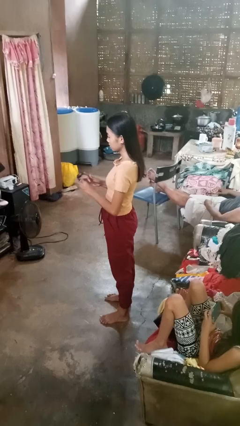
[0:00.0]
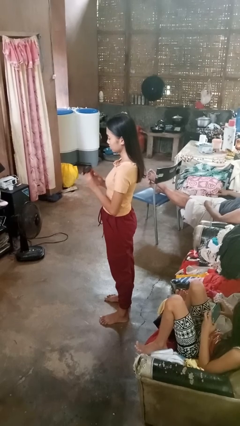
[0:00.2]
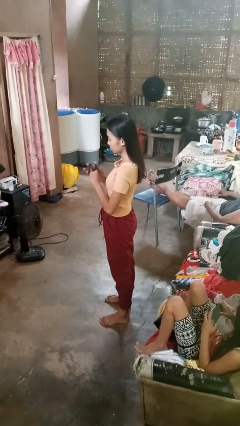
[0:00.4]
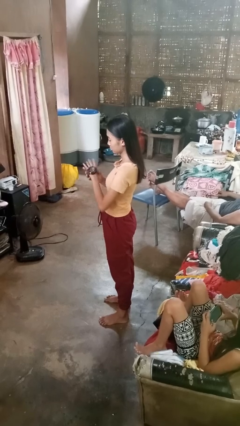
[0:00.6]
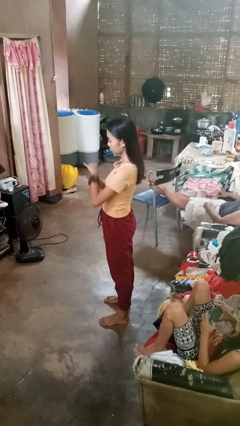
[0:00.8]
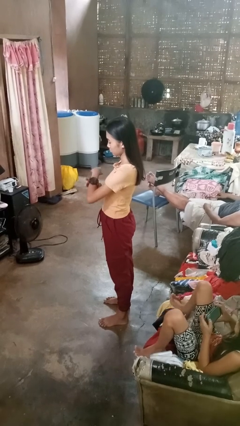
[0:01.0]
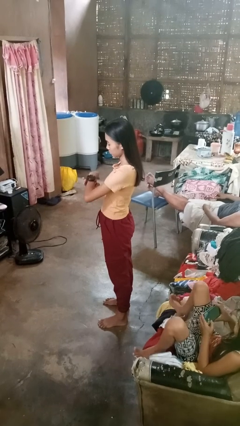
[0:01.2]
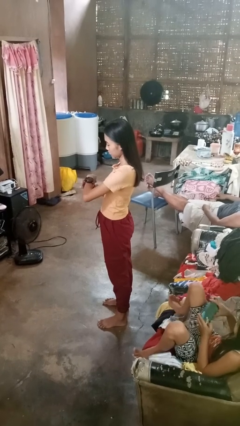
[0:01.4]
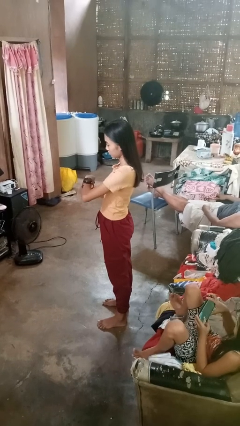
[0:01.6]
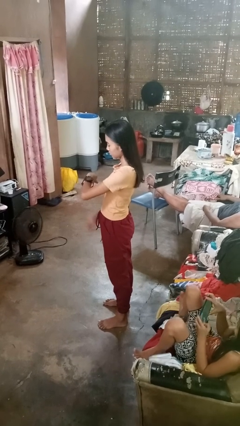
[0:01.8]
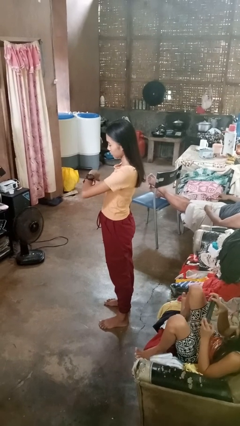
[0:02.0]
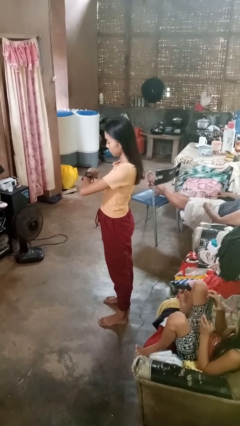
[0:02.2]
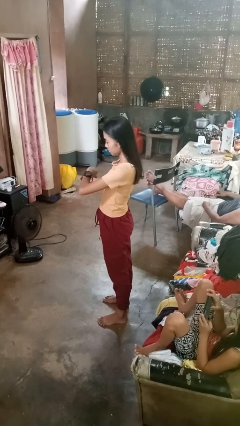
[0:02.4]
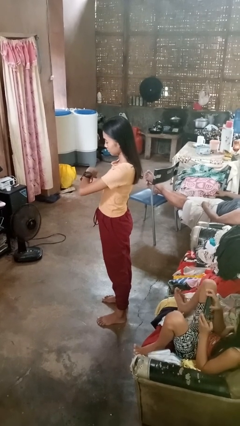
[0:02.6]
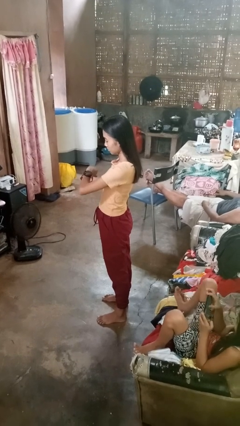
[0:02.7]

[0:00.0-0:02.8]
person puts on wristwatch

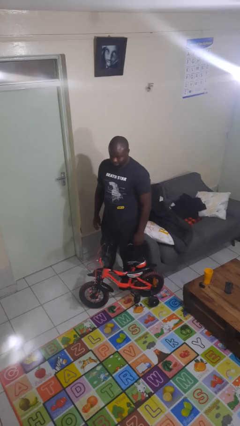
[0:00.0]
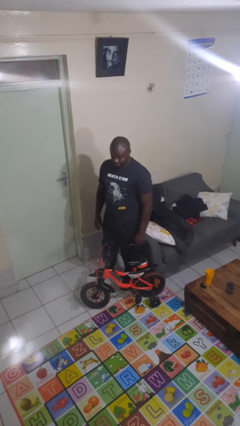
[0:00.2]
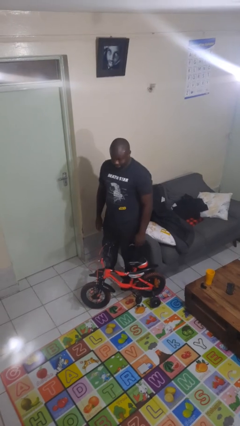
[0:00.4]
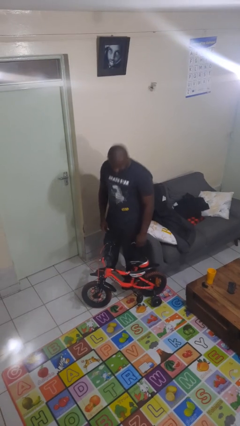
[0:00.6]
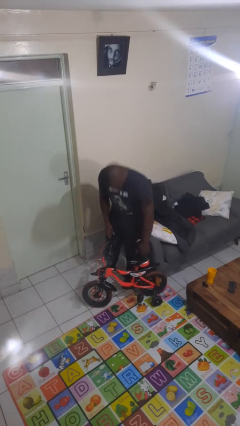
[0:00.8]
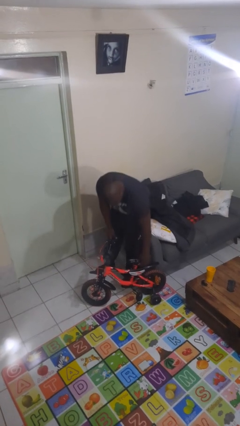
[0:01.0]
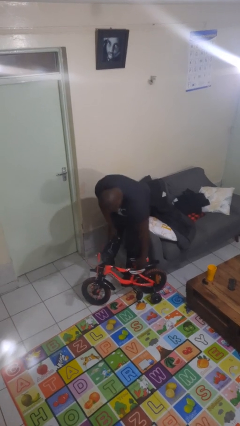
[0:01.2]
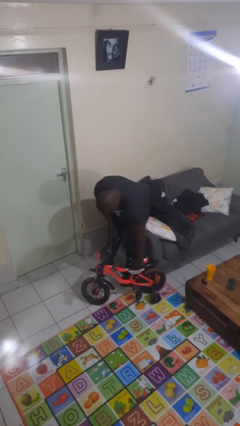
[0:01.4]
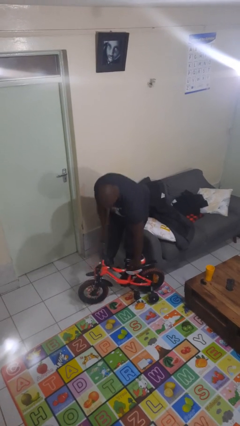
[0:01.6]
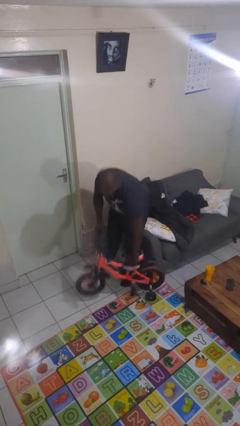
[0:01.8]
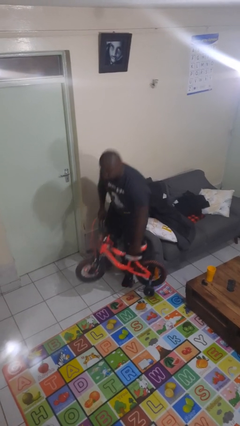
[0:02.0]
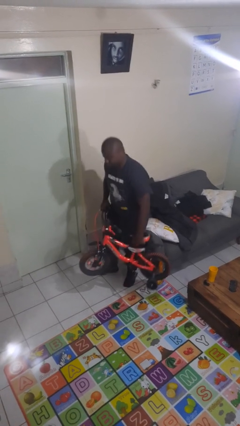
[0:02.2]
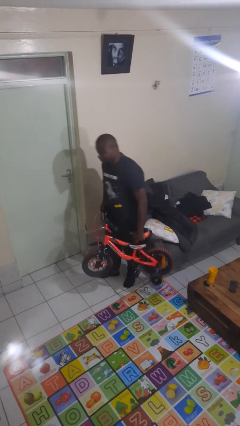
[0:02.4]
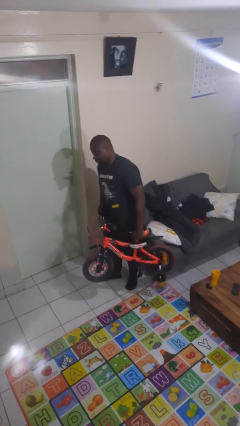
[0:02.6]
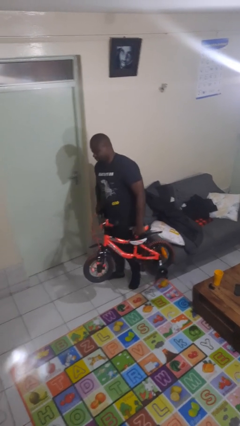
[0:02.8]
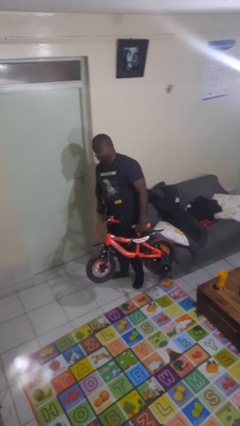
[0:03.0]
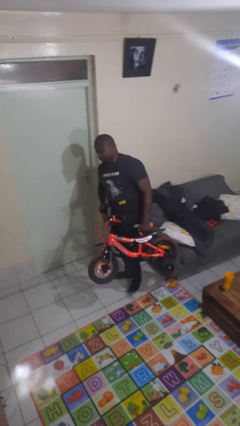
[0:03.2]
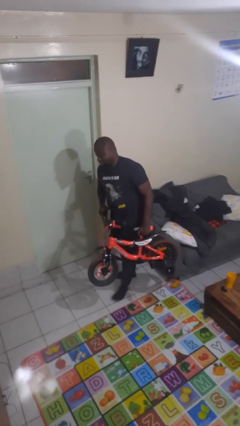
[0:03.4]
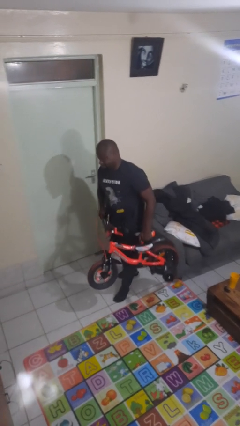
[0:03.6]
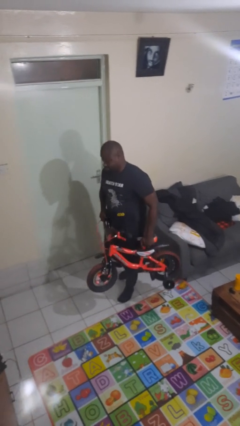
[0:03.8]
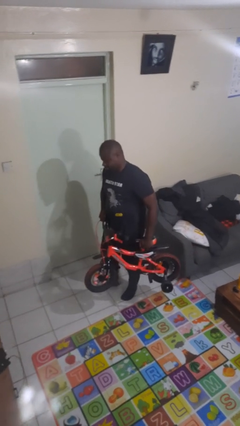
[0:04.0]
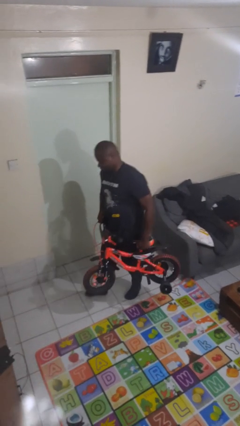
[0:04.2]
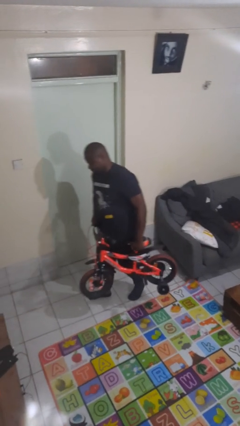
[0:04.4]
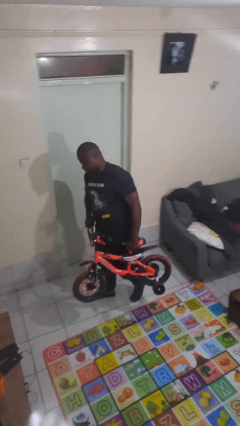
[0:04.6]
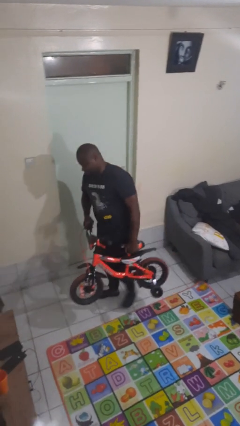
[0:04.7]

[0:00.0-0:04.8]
person carries bicycle

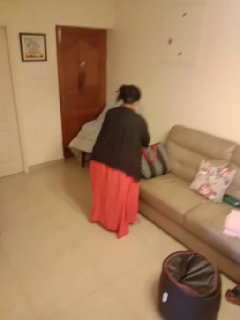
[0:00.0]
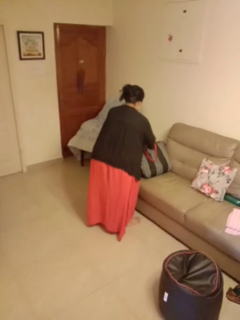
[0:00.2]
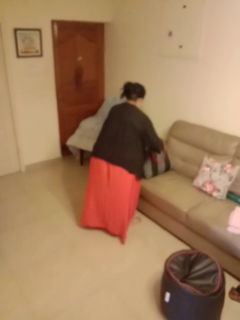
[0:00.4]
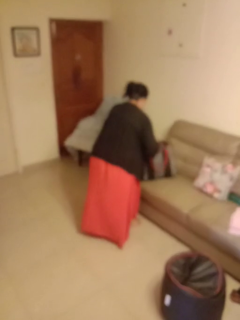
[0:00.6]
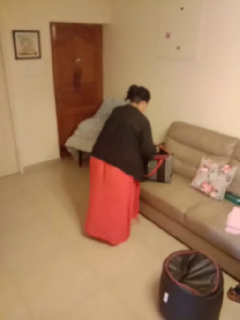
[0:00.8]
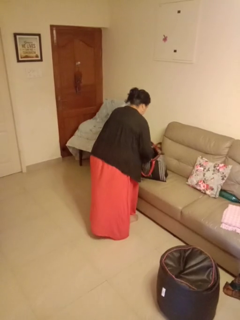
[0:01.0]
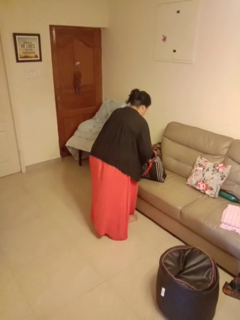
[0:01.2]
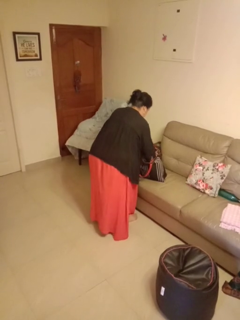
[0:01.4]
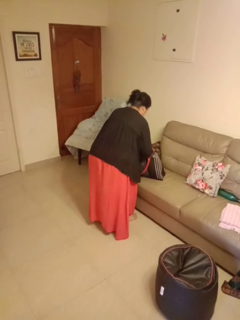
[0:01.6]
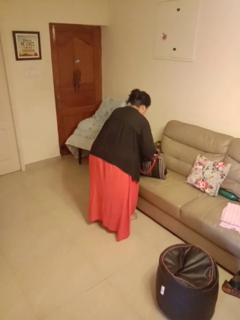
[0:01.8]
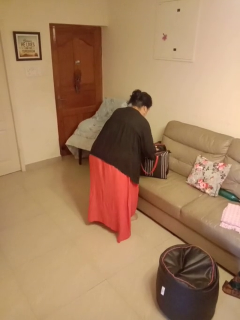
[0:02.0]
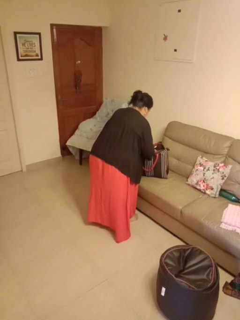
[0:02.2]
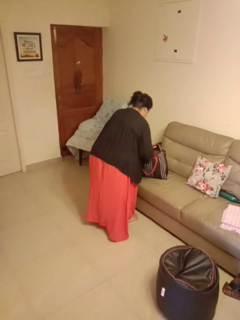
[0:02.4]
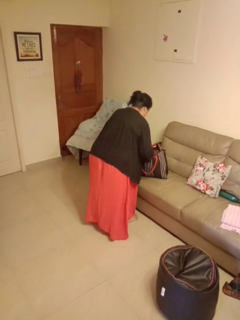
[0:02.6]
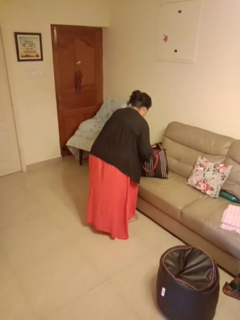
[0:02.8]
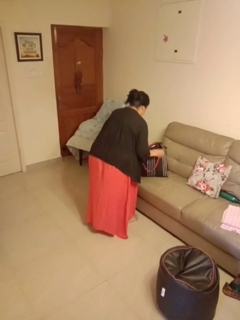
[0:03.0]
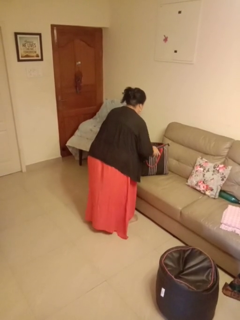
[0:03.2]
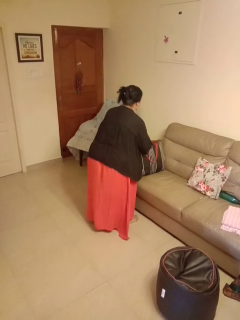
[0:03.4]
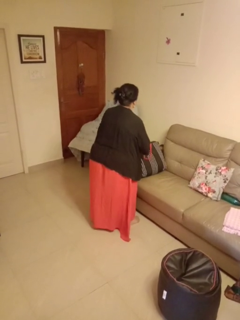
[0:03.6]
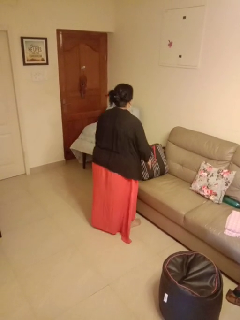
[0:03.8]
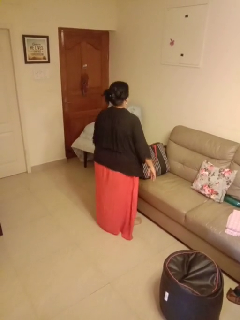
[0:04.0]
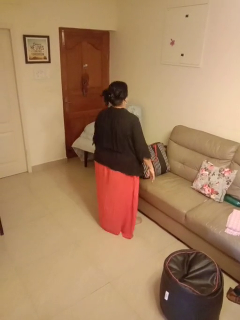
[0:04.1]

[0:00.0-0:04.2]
person searches in bag

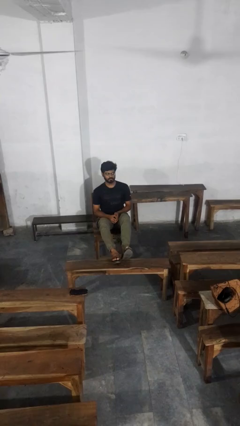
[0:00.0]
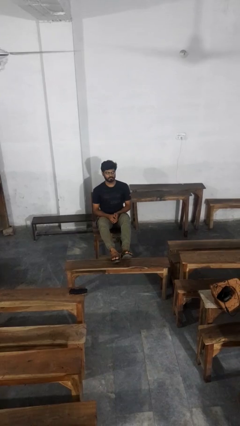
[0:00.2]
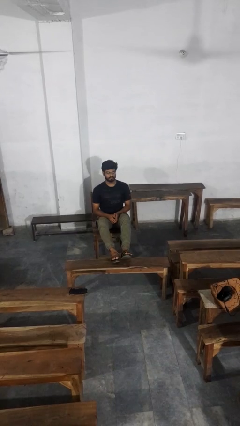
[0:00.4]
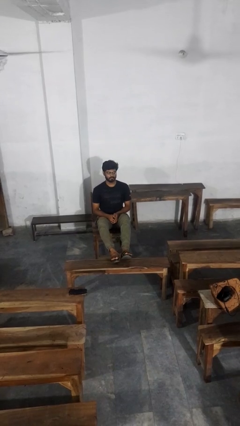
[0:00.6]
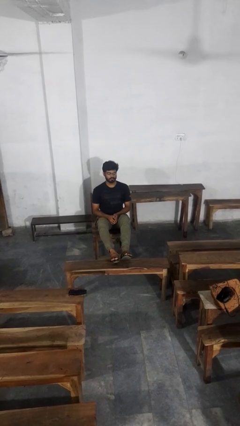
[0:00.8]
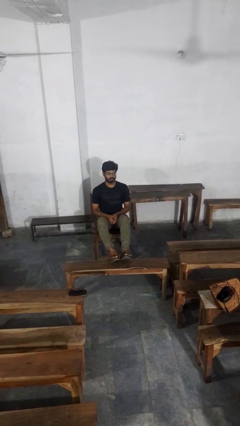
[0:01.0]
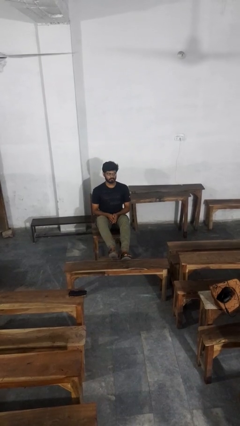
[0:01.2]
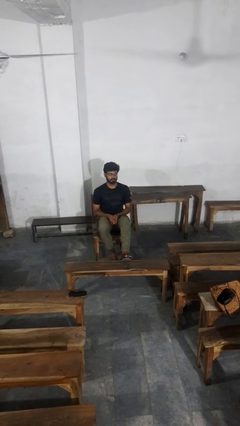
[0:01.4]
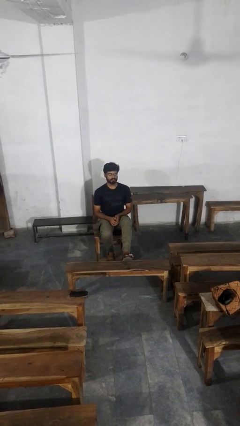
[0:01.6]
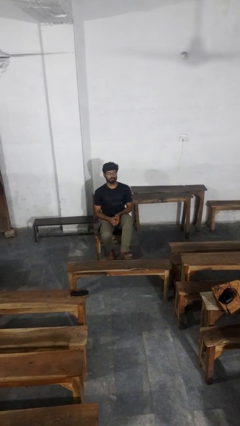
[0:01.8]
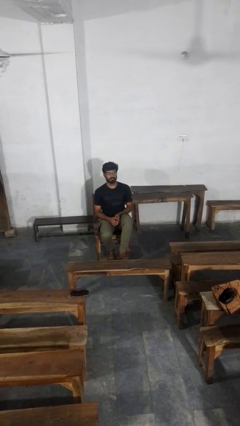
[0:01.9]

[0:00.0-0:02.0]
person puts feet up

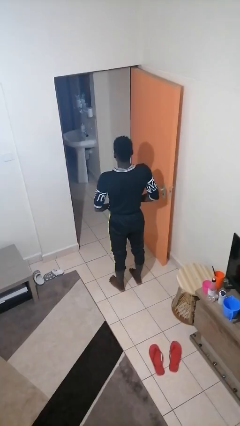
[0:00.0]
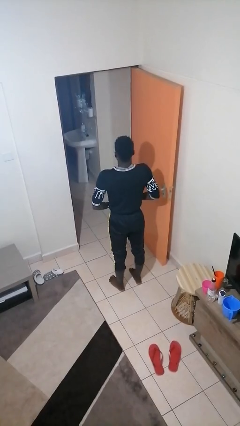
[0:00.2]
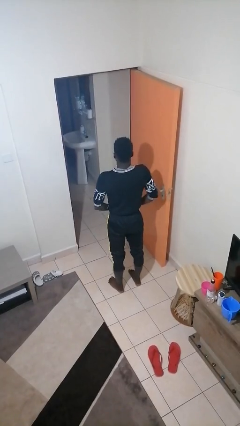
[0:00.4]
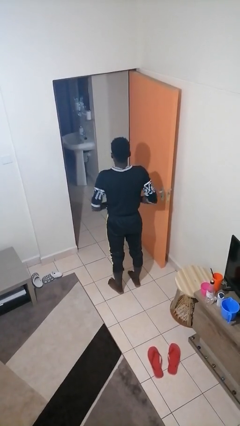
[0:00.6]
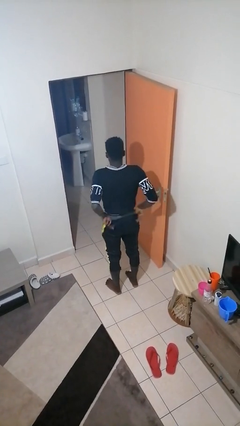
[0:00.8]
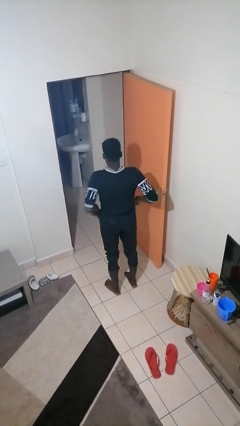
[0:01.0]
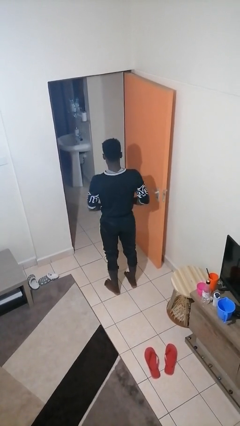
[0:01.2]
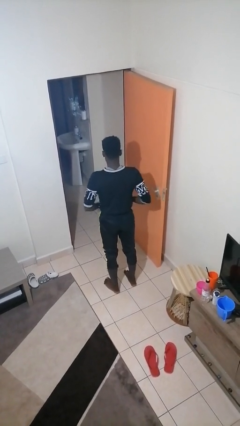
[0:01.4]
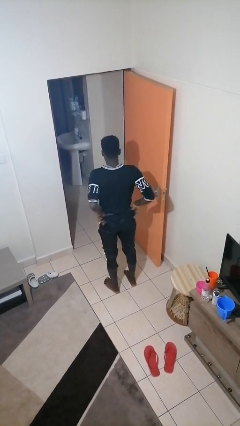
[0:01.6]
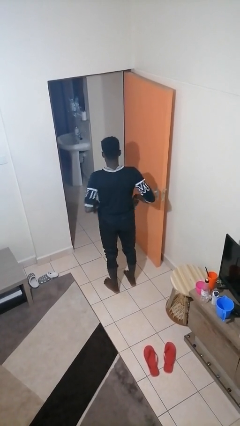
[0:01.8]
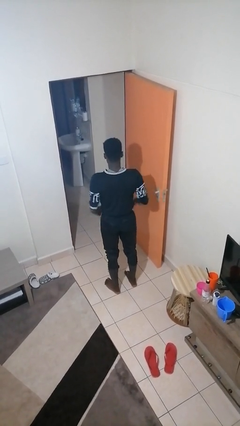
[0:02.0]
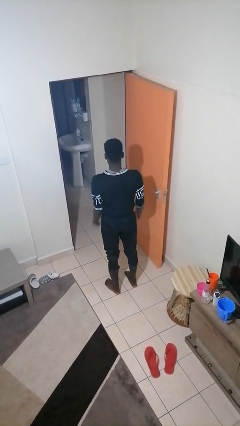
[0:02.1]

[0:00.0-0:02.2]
person hikes up pants

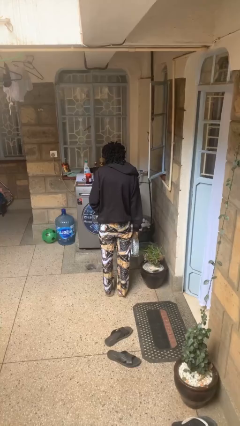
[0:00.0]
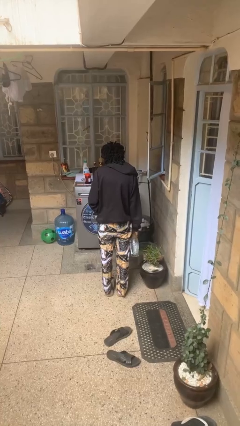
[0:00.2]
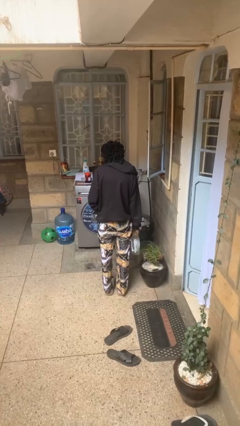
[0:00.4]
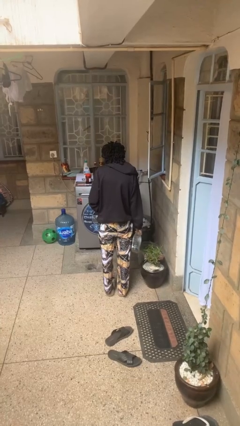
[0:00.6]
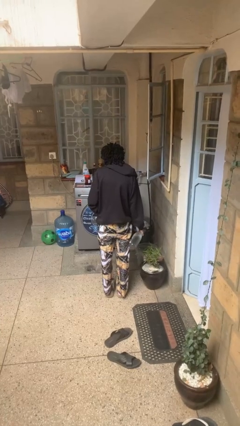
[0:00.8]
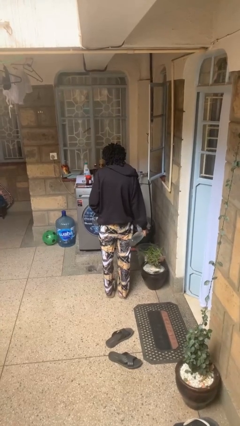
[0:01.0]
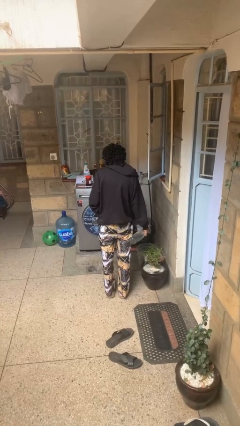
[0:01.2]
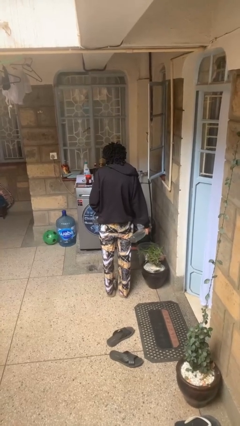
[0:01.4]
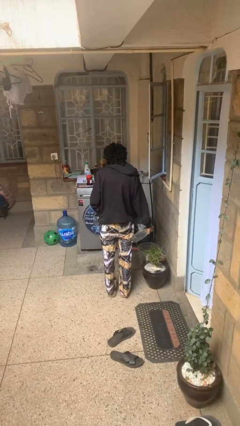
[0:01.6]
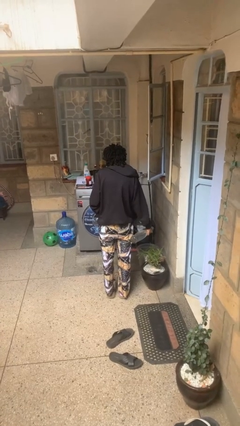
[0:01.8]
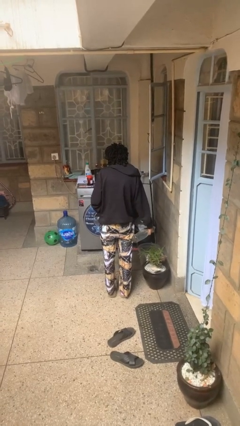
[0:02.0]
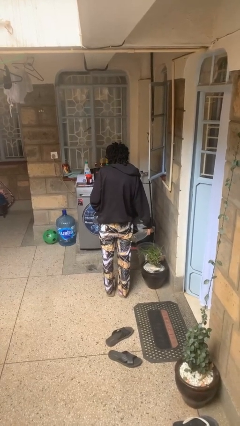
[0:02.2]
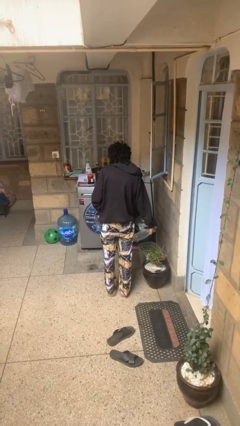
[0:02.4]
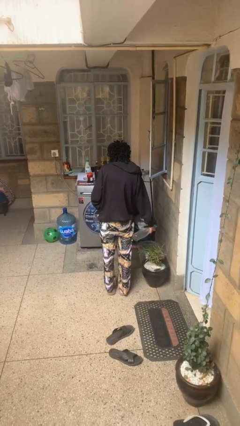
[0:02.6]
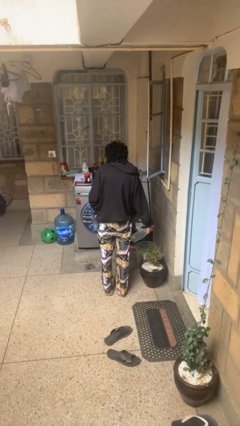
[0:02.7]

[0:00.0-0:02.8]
person waters houseplant
